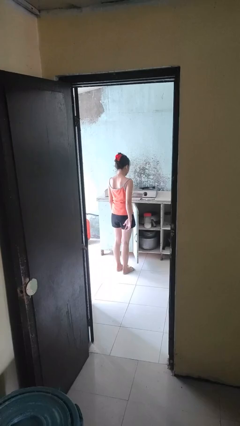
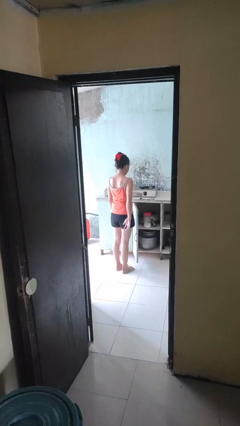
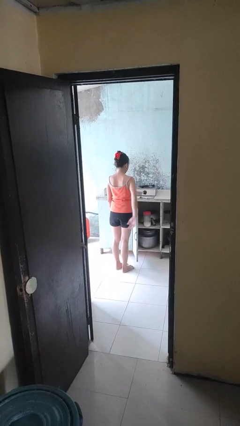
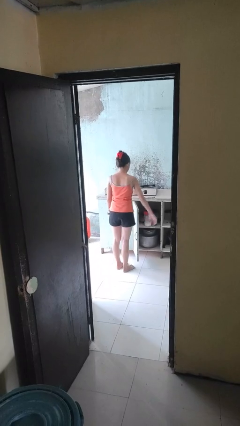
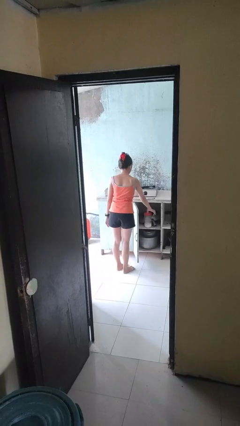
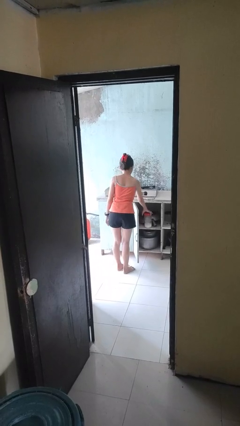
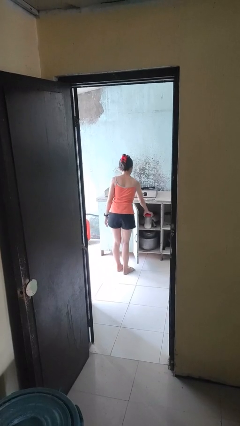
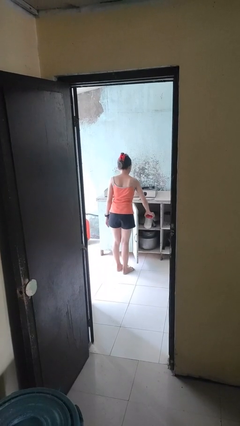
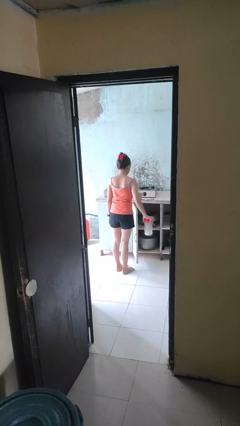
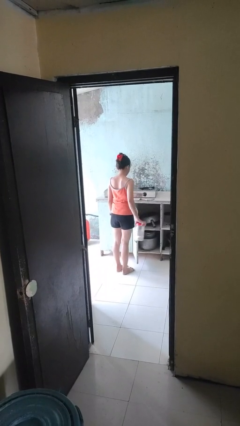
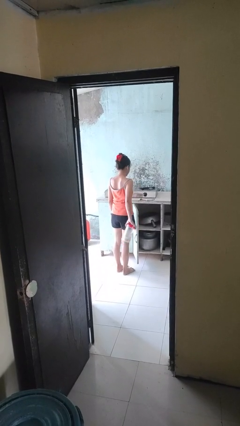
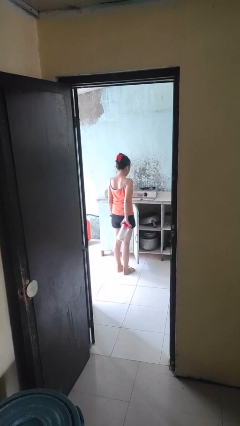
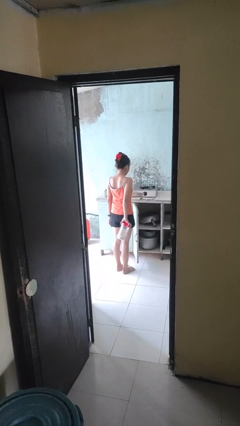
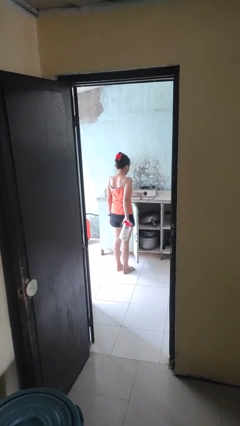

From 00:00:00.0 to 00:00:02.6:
person picks up object from cabinet

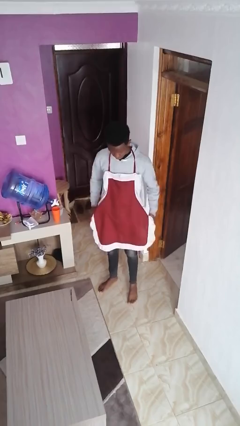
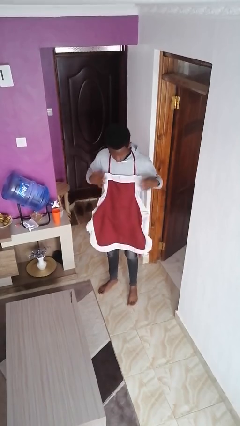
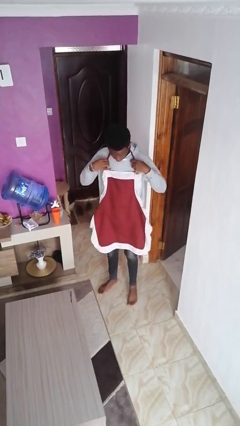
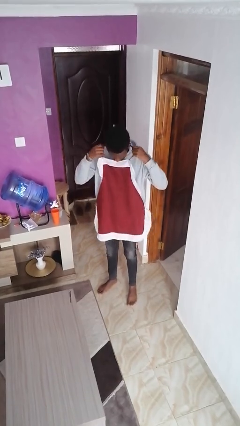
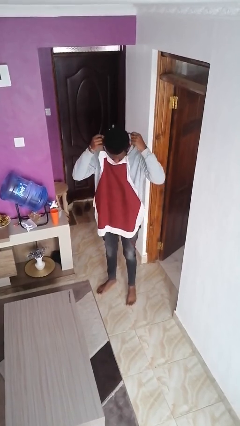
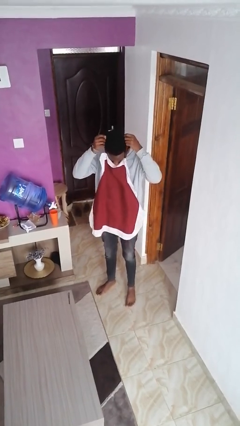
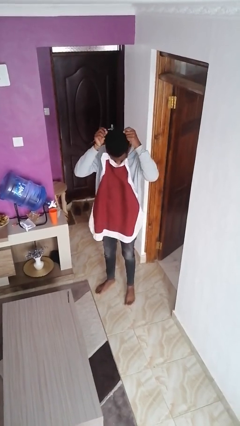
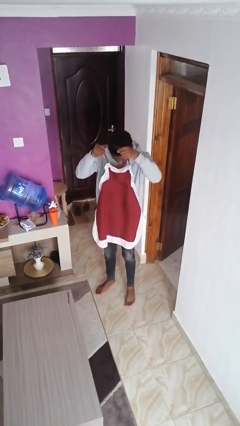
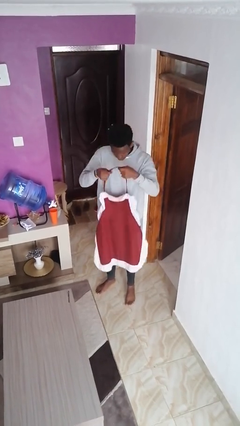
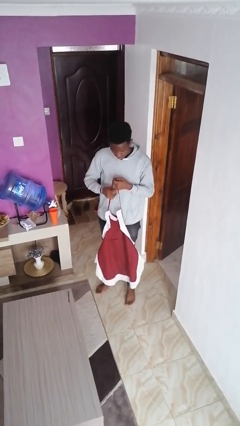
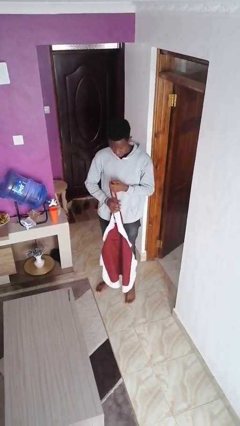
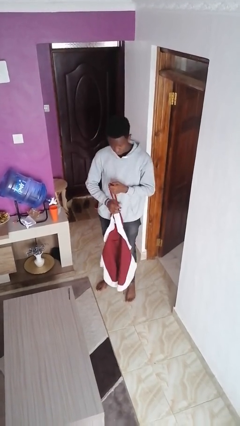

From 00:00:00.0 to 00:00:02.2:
person takes off apron

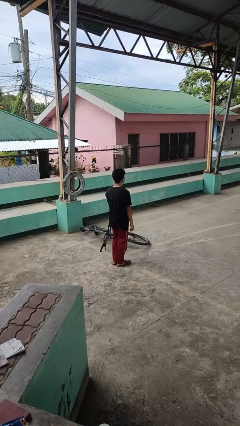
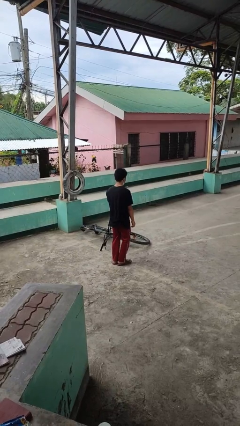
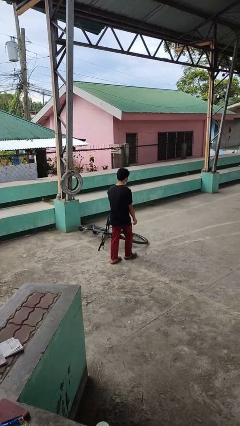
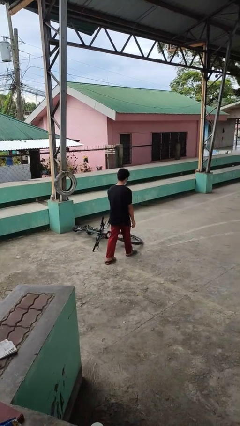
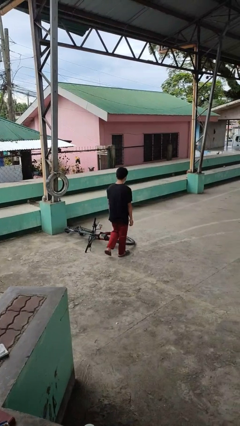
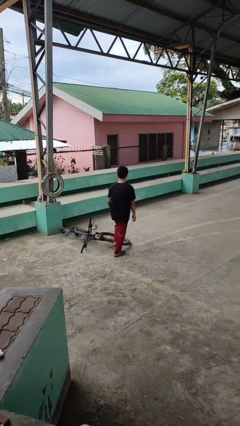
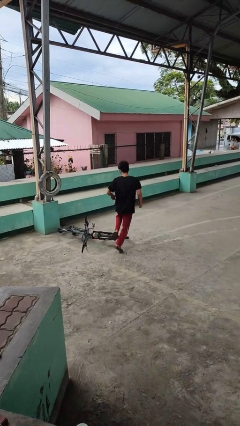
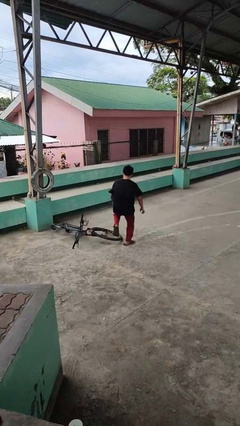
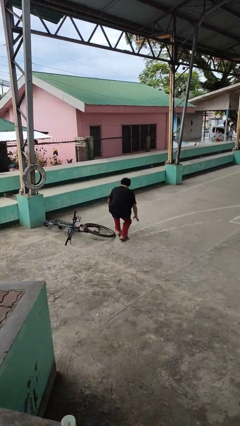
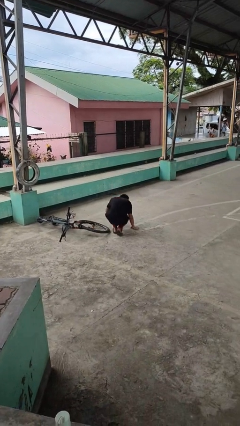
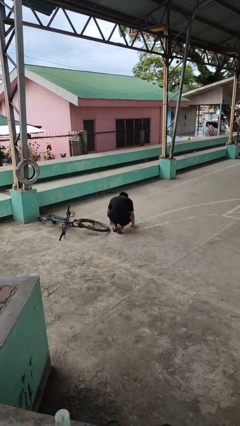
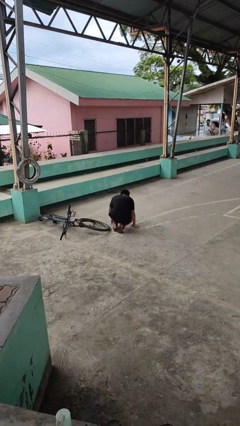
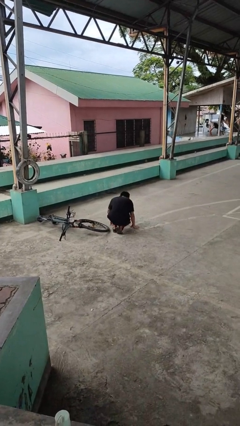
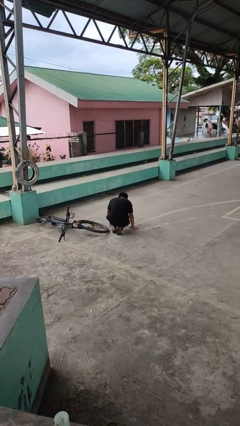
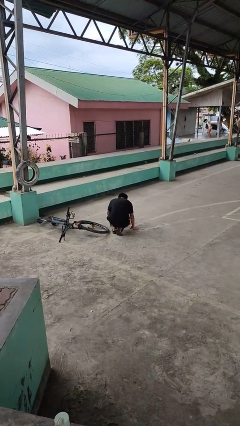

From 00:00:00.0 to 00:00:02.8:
person drops object

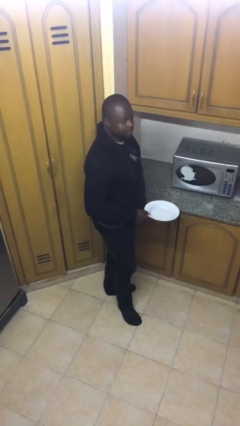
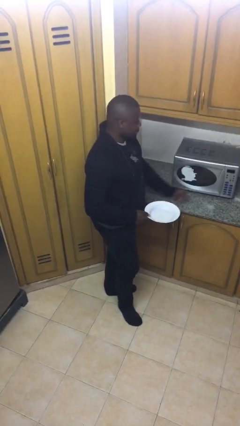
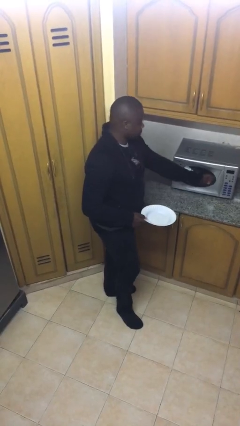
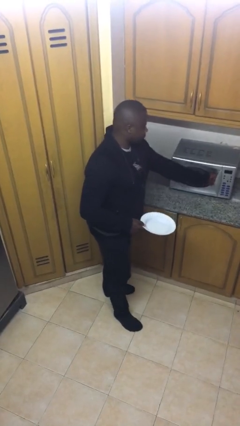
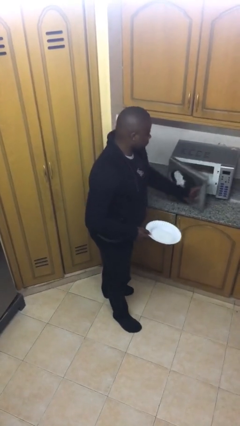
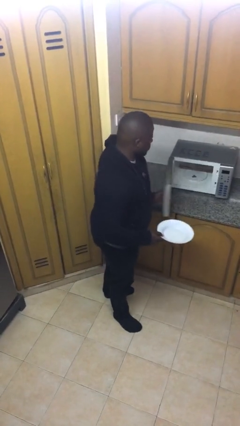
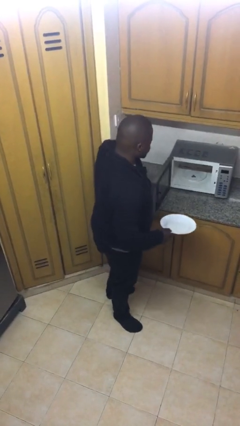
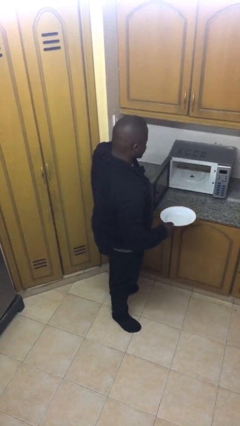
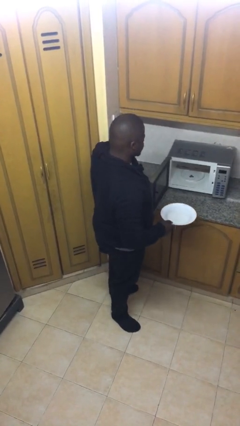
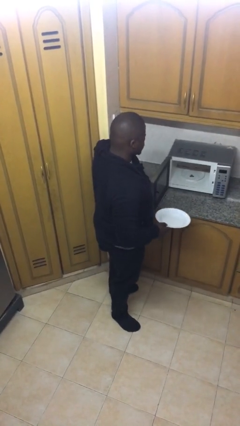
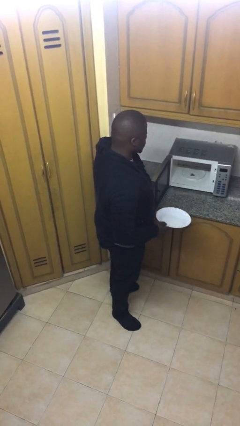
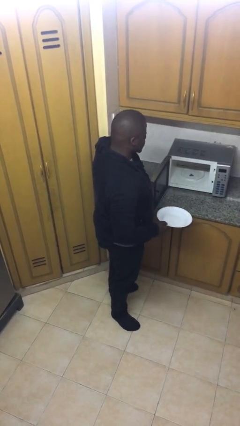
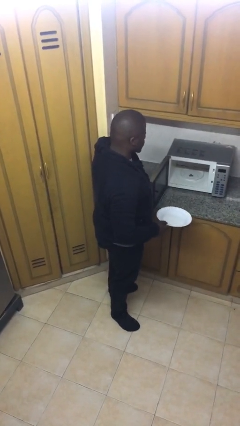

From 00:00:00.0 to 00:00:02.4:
person opens microwave

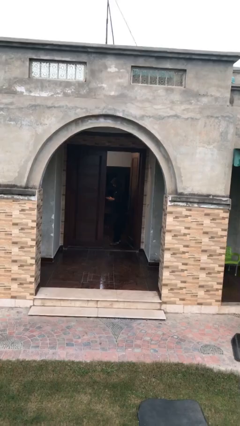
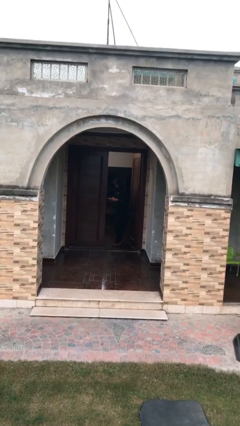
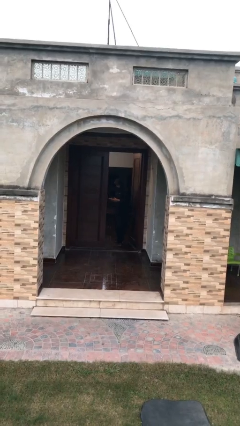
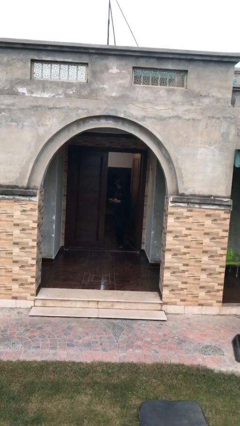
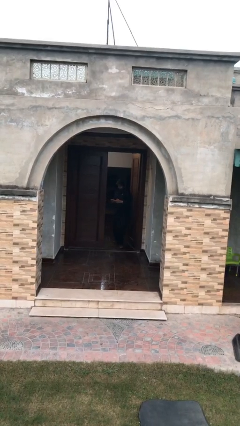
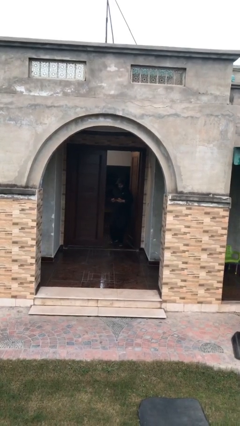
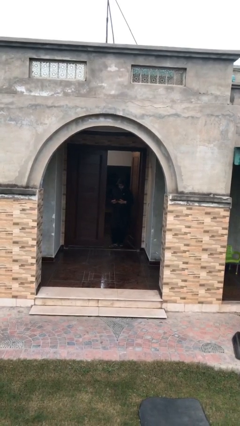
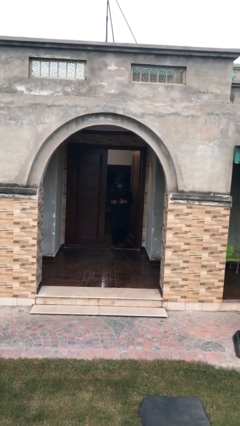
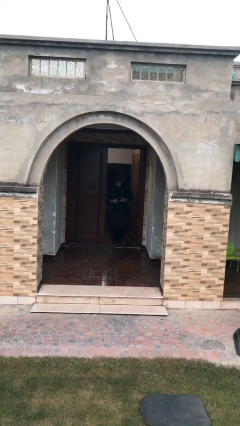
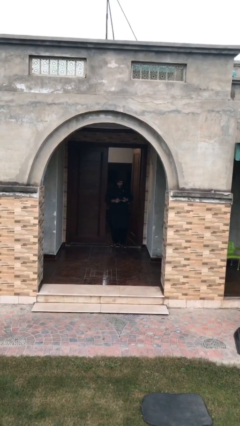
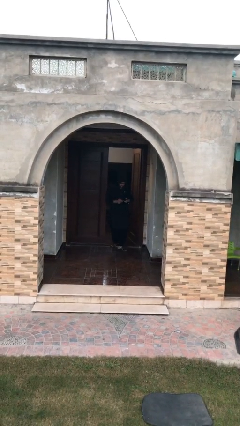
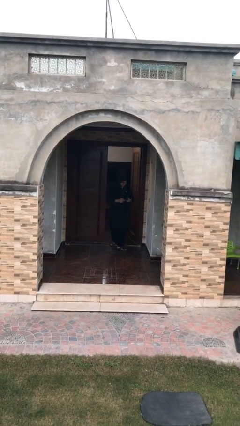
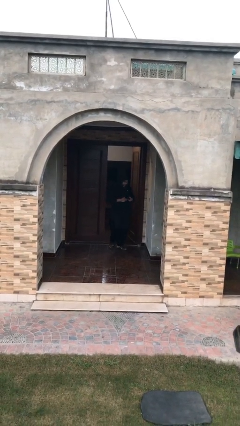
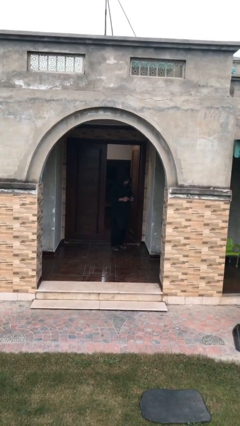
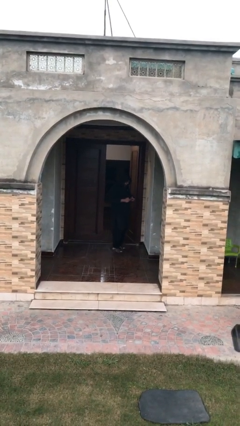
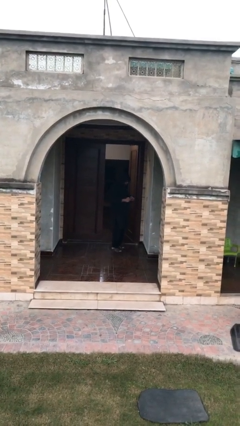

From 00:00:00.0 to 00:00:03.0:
person enters scene through structure

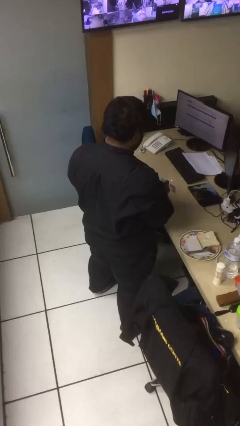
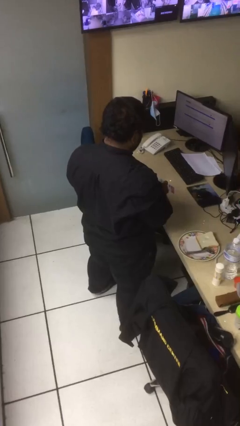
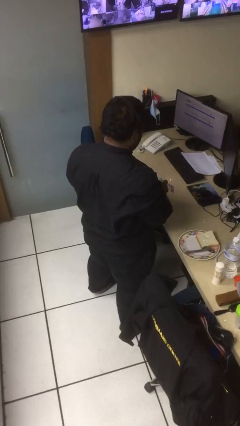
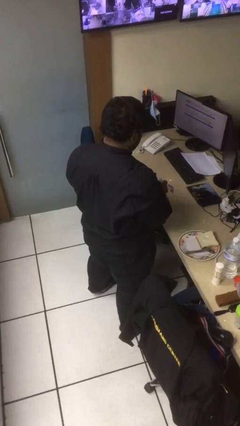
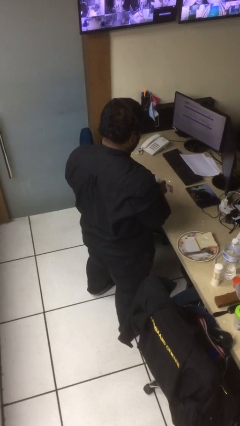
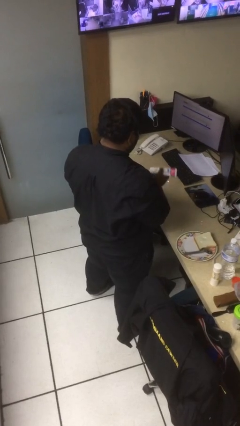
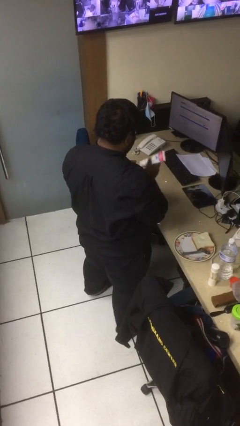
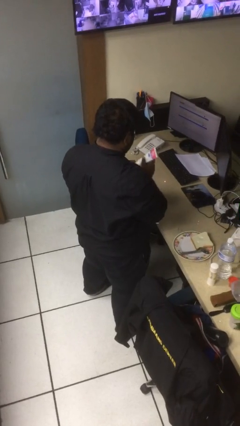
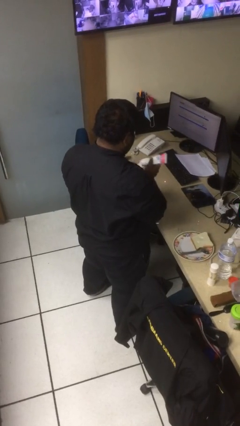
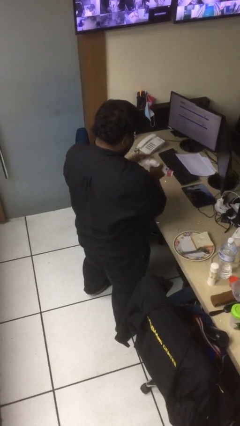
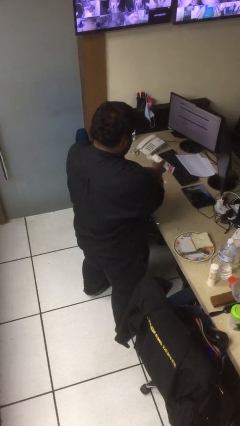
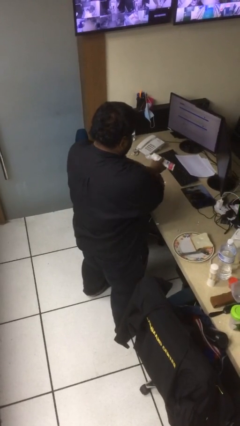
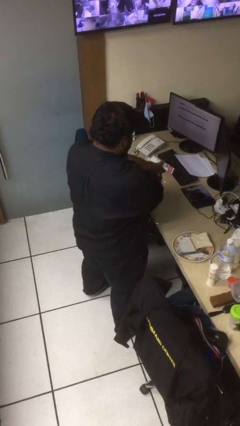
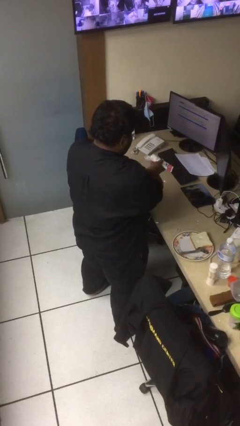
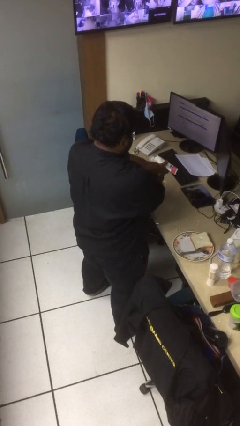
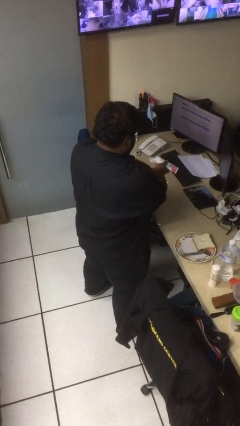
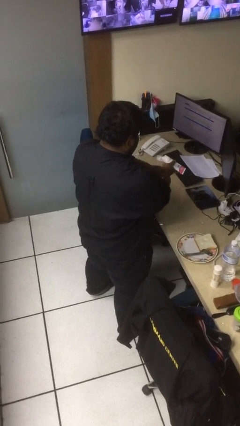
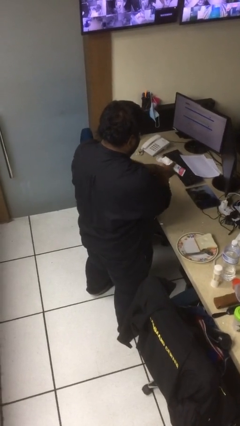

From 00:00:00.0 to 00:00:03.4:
person applies sunscreen

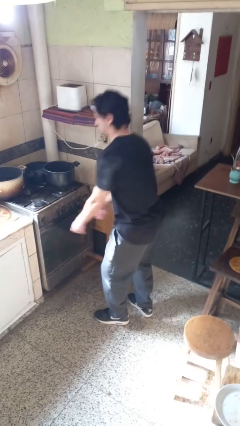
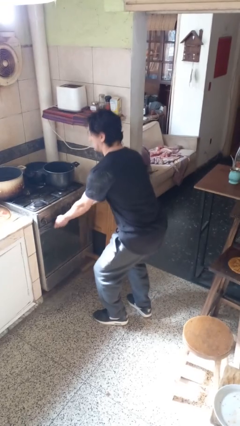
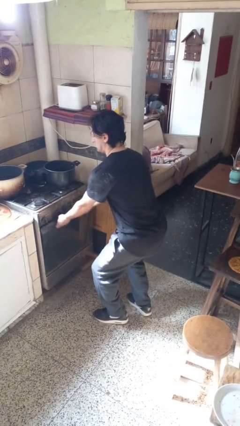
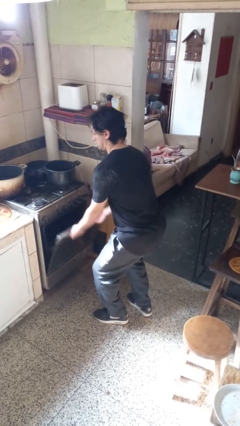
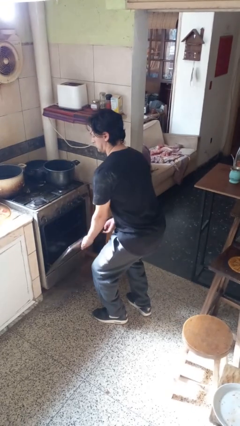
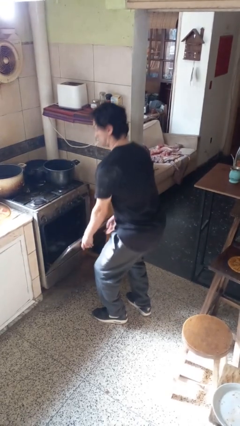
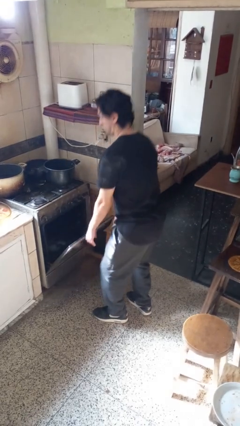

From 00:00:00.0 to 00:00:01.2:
person opens oven door
